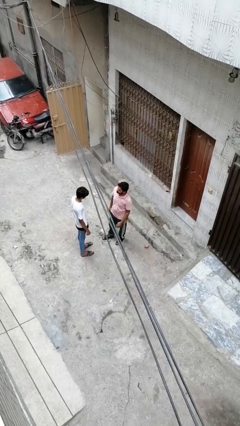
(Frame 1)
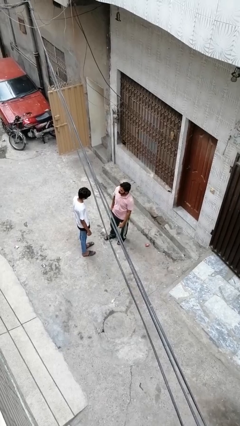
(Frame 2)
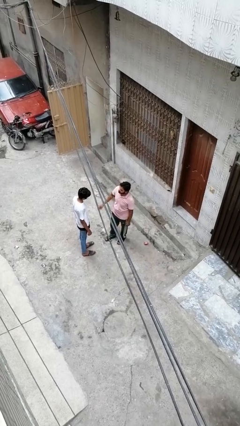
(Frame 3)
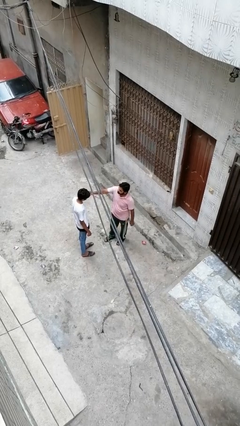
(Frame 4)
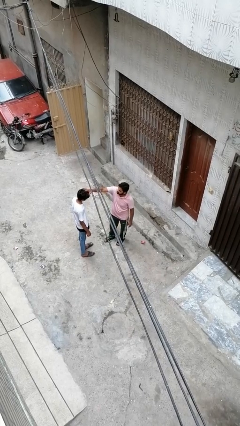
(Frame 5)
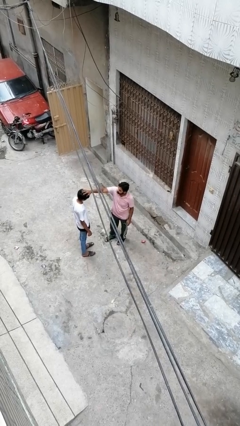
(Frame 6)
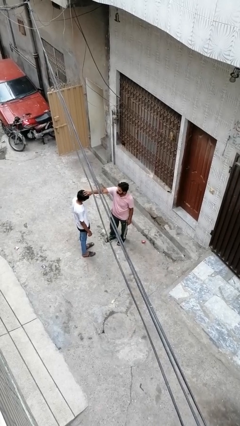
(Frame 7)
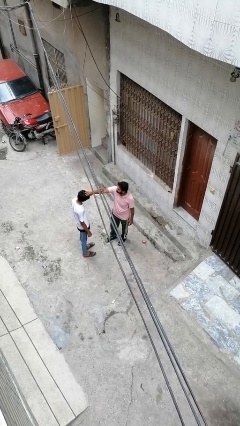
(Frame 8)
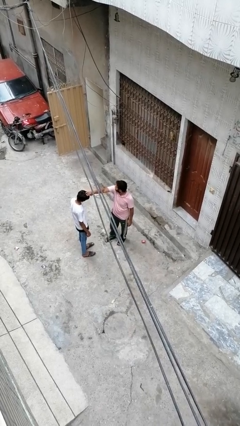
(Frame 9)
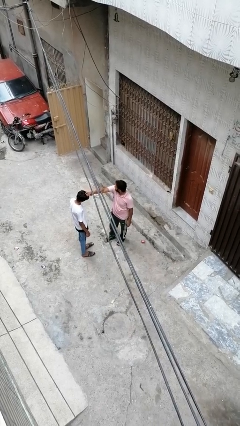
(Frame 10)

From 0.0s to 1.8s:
person grabs person by hair

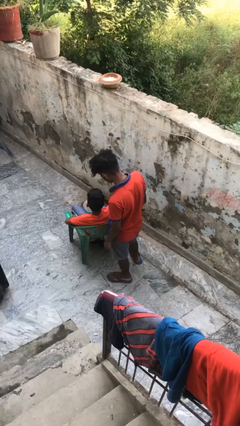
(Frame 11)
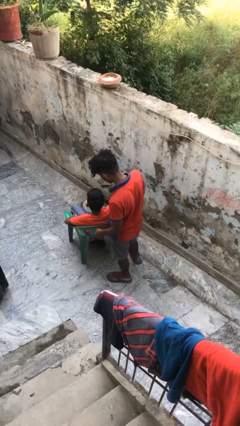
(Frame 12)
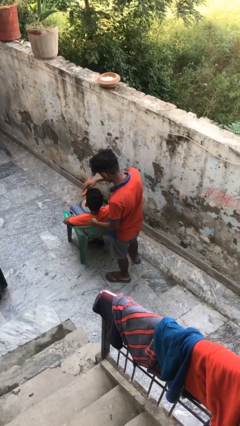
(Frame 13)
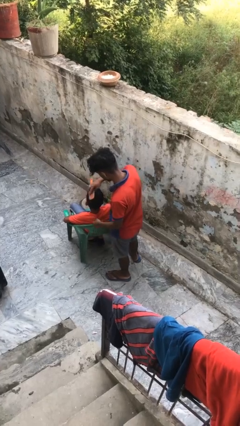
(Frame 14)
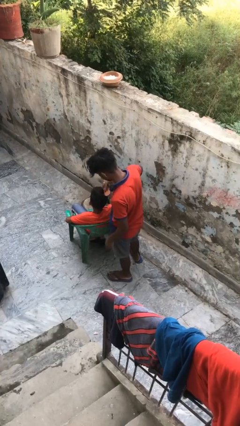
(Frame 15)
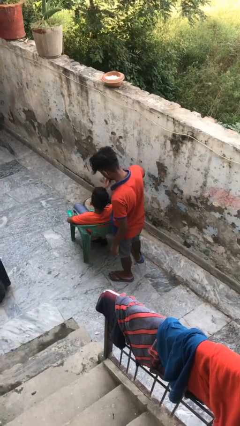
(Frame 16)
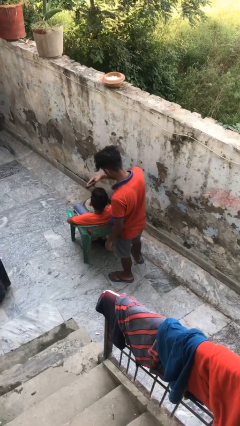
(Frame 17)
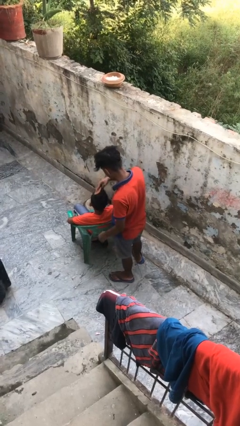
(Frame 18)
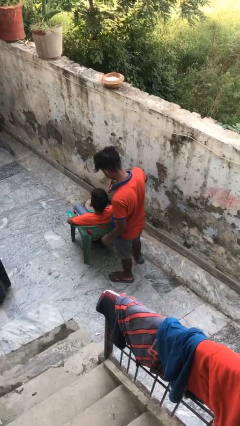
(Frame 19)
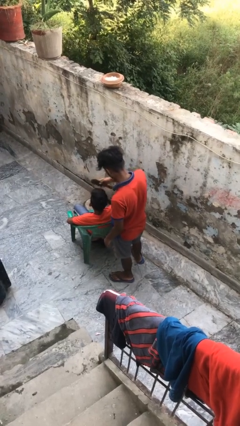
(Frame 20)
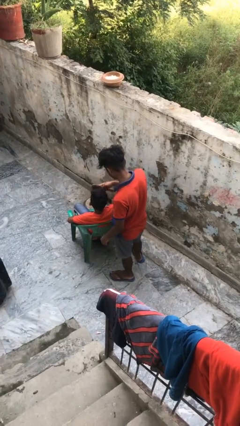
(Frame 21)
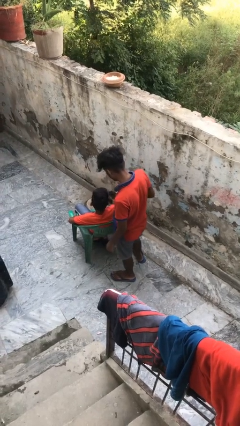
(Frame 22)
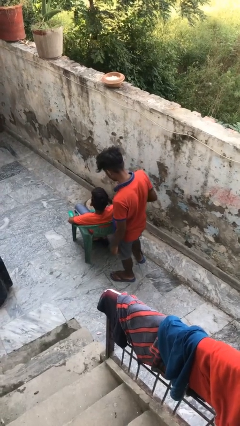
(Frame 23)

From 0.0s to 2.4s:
person brushes hair of person

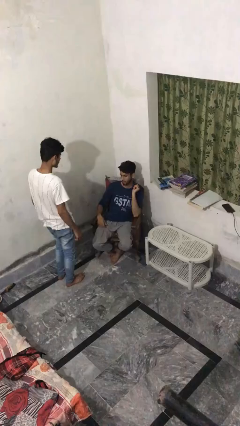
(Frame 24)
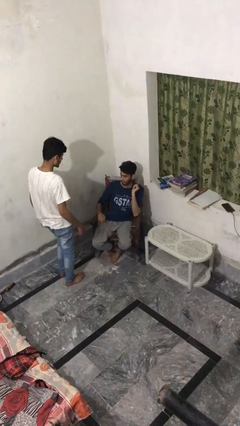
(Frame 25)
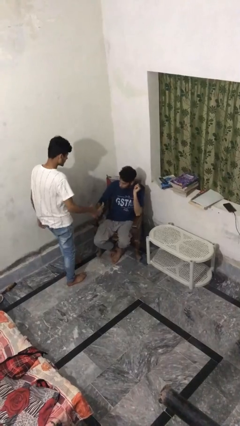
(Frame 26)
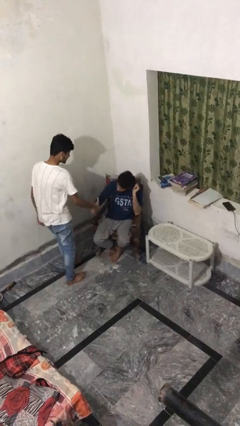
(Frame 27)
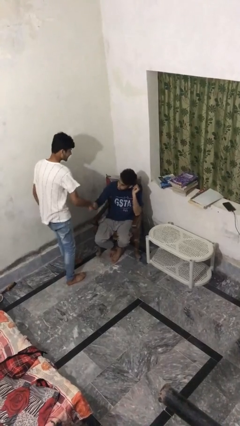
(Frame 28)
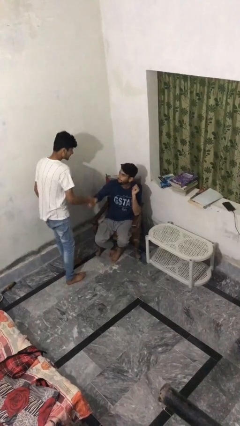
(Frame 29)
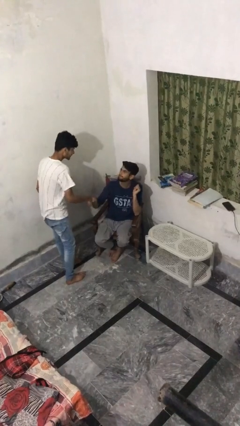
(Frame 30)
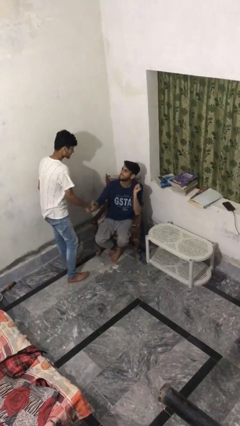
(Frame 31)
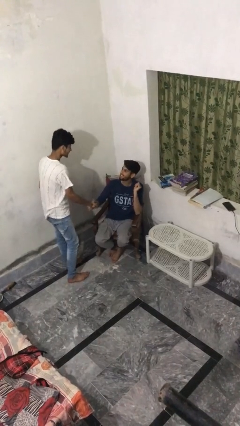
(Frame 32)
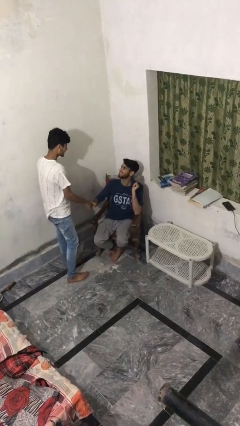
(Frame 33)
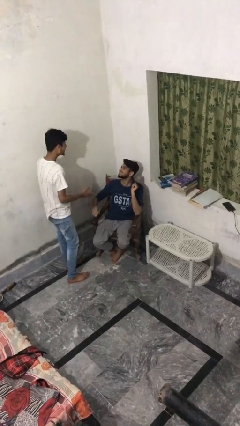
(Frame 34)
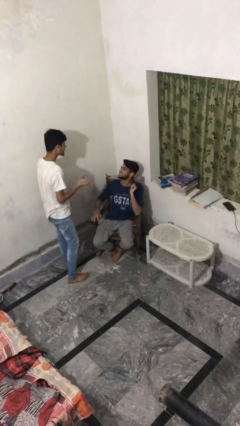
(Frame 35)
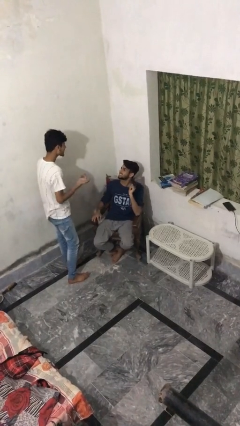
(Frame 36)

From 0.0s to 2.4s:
person shakes hand

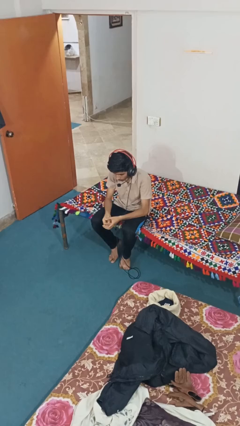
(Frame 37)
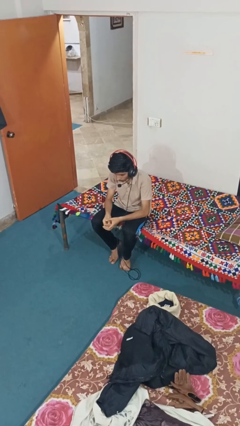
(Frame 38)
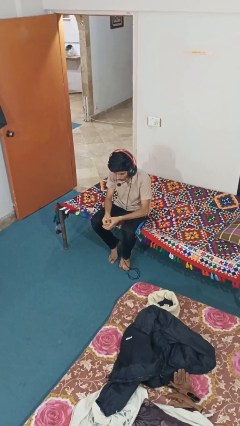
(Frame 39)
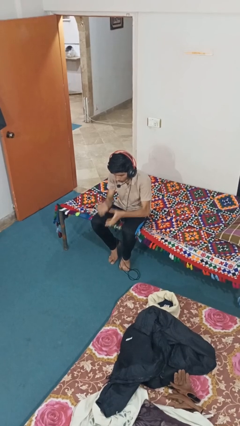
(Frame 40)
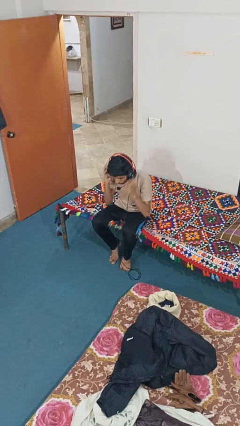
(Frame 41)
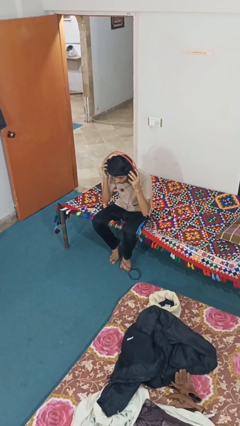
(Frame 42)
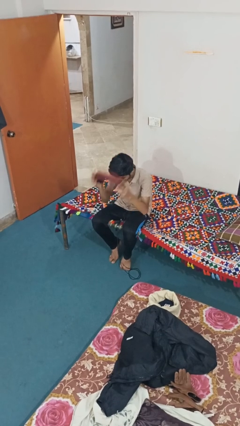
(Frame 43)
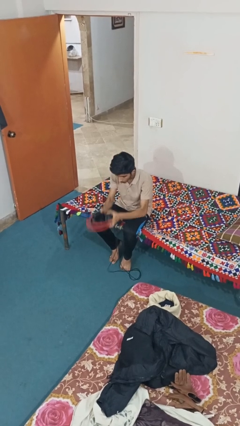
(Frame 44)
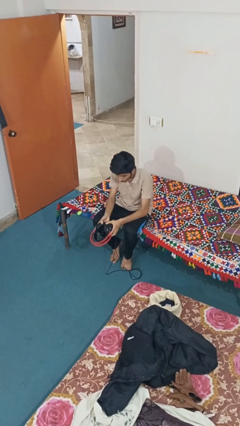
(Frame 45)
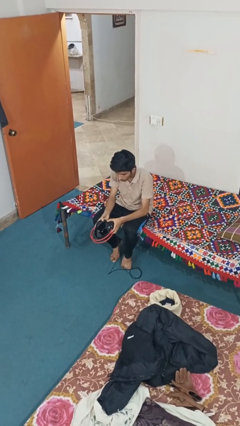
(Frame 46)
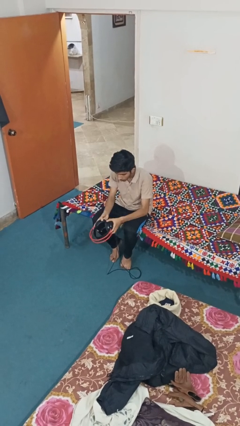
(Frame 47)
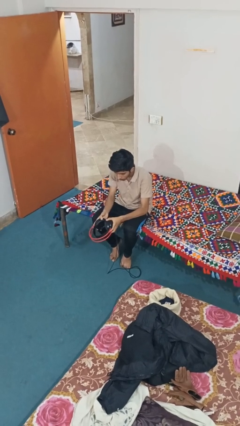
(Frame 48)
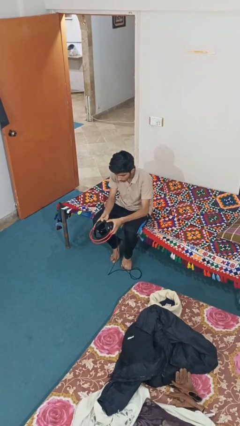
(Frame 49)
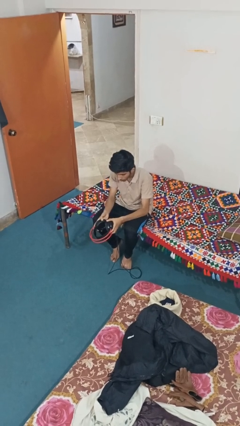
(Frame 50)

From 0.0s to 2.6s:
person takes off headphones

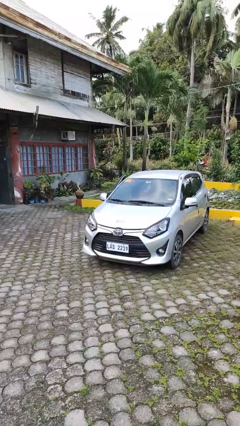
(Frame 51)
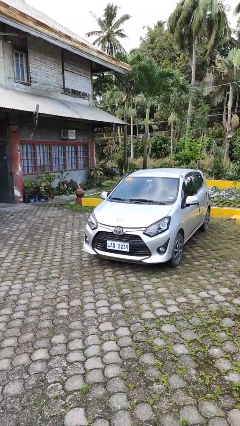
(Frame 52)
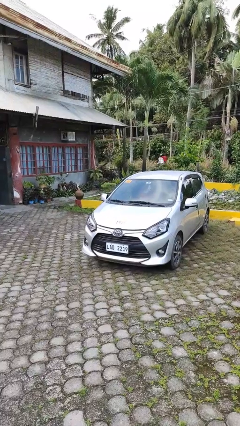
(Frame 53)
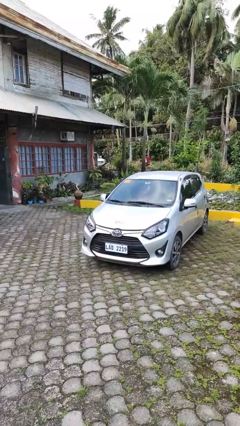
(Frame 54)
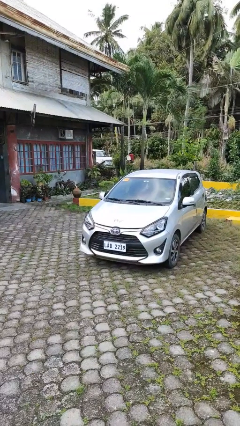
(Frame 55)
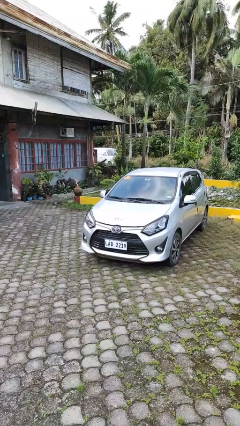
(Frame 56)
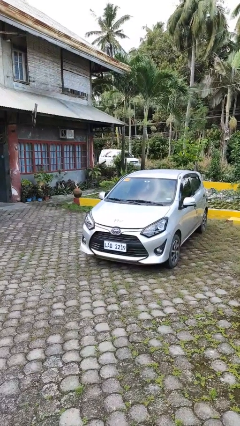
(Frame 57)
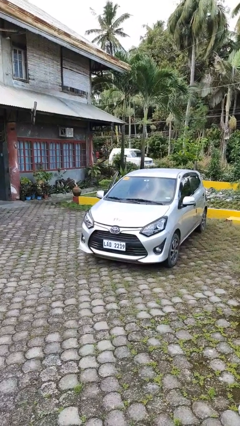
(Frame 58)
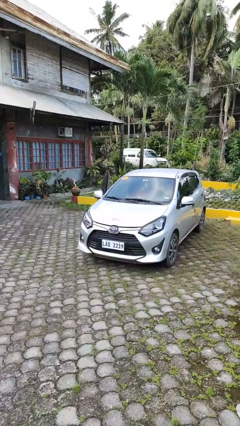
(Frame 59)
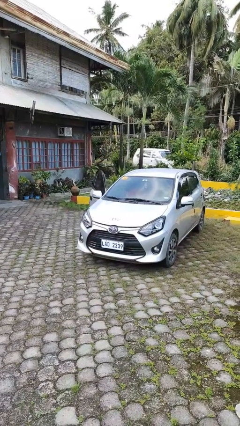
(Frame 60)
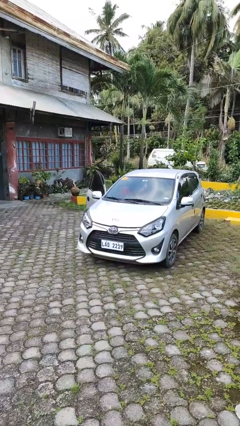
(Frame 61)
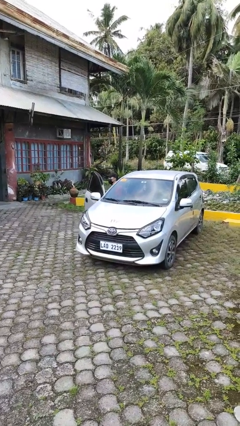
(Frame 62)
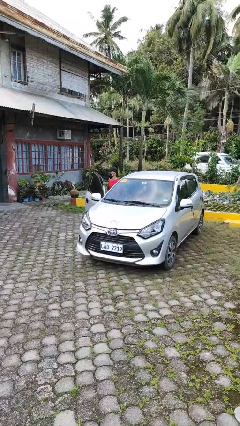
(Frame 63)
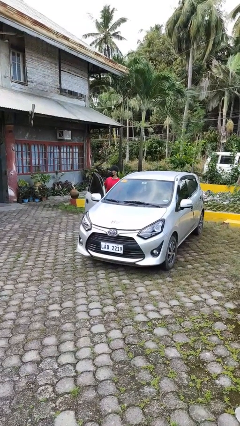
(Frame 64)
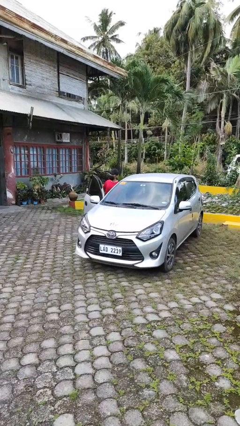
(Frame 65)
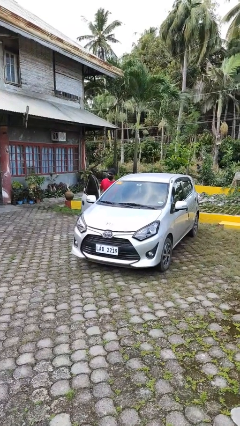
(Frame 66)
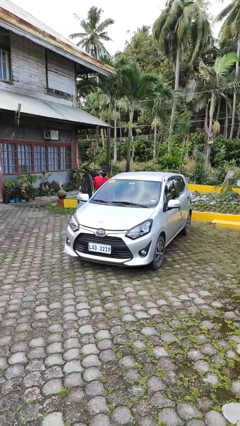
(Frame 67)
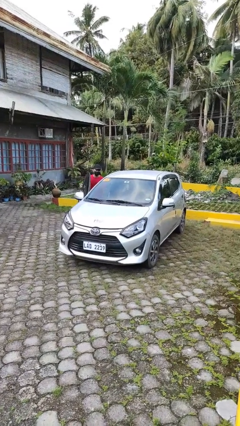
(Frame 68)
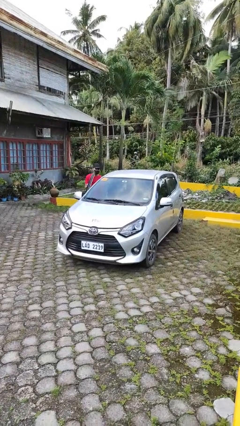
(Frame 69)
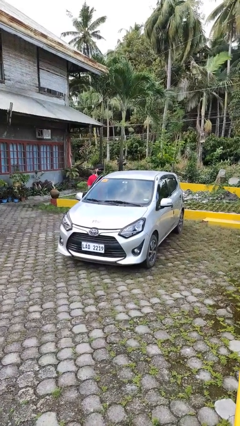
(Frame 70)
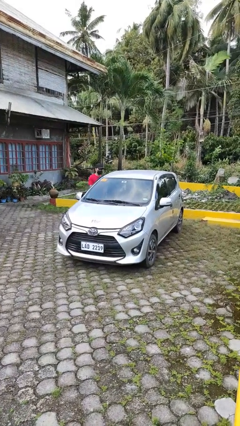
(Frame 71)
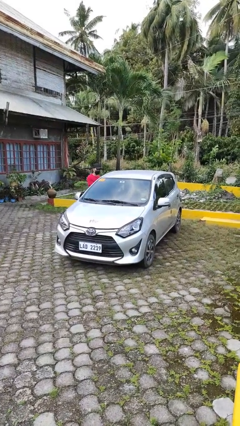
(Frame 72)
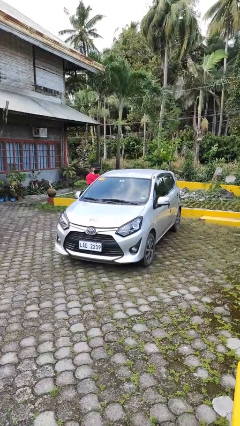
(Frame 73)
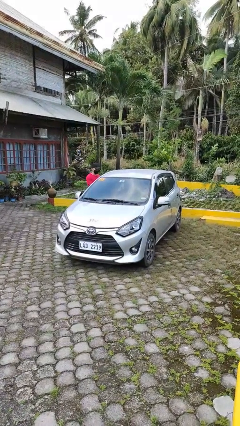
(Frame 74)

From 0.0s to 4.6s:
car drops off person

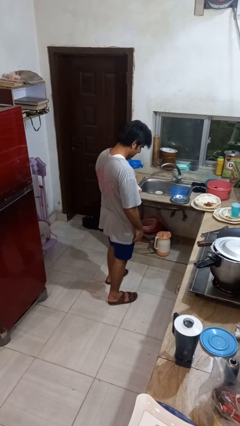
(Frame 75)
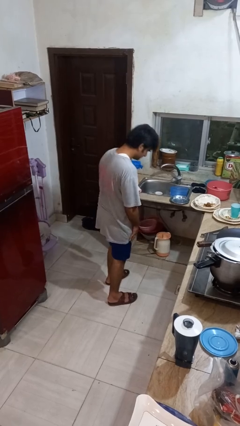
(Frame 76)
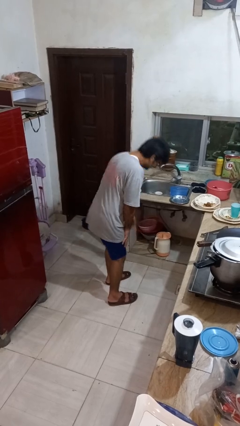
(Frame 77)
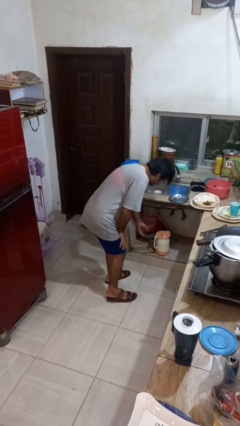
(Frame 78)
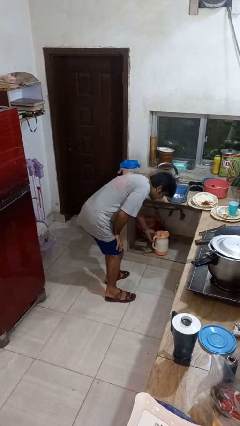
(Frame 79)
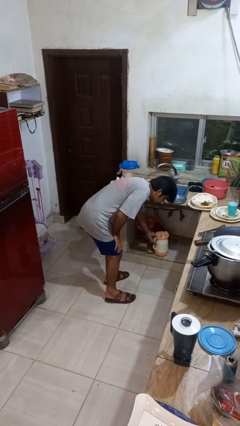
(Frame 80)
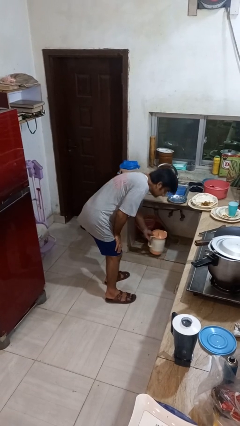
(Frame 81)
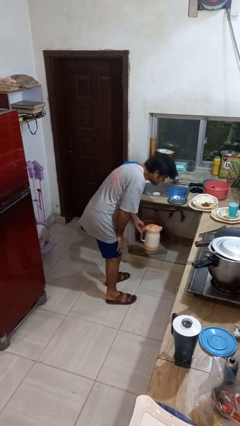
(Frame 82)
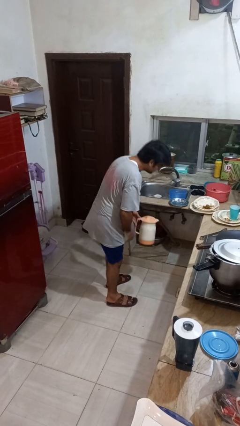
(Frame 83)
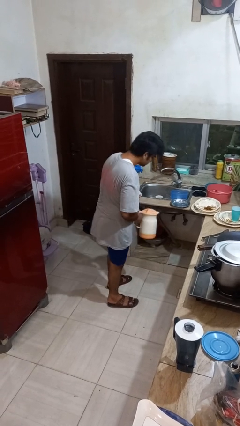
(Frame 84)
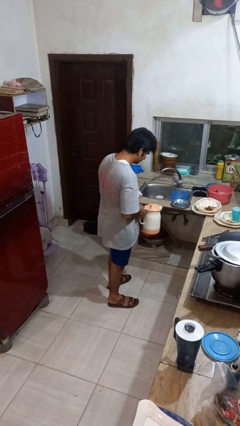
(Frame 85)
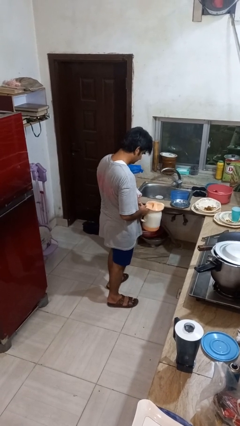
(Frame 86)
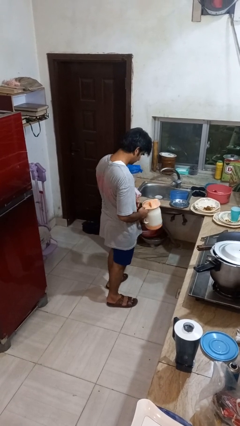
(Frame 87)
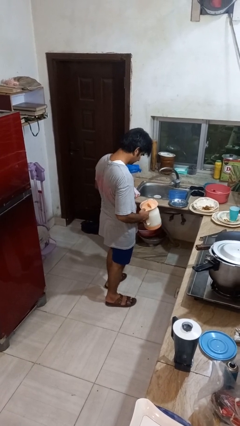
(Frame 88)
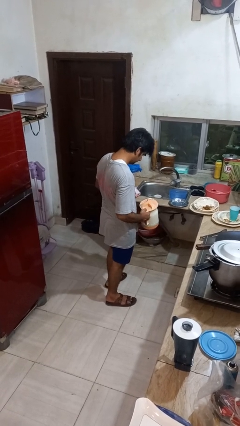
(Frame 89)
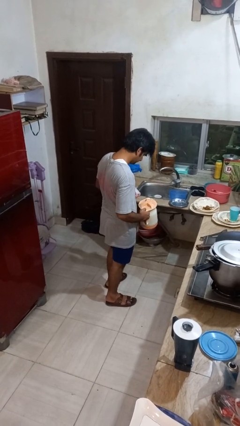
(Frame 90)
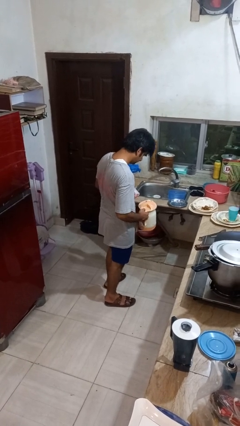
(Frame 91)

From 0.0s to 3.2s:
person picks up object from cabinet

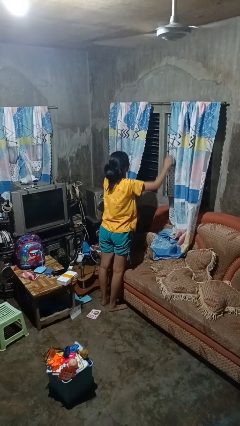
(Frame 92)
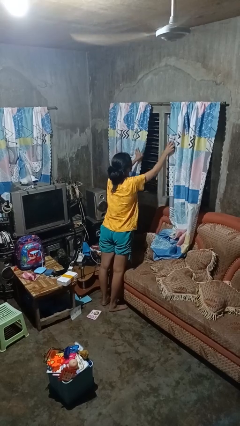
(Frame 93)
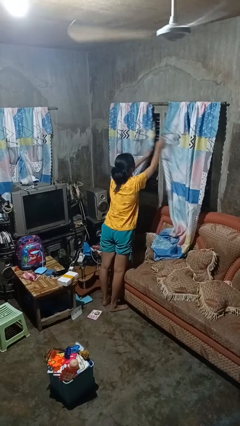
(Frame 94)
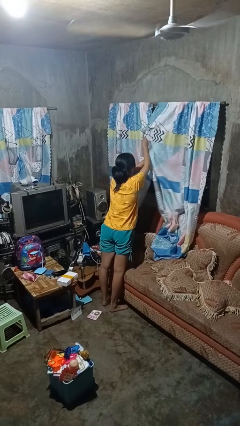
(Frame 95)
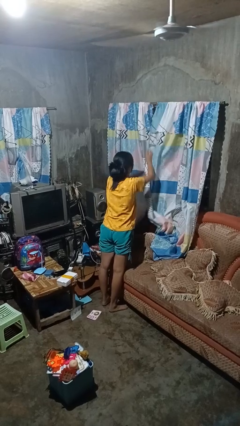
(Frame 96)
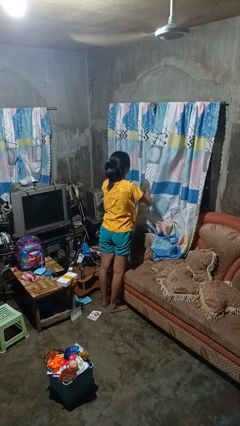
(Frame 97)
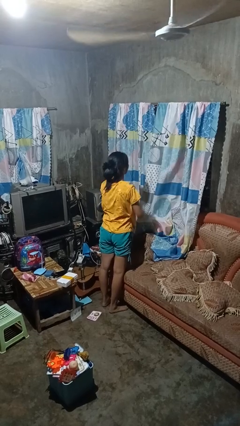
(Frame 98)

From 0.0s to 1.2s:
person closes curtains
